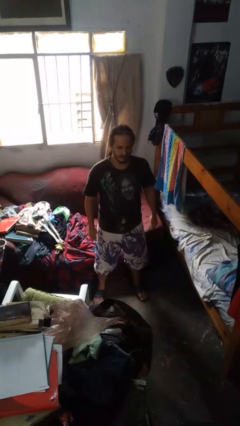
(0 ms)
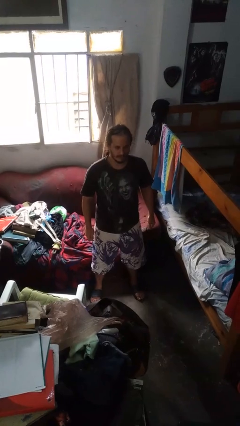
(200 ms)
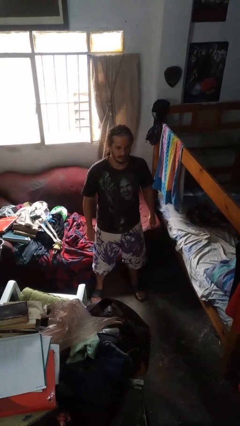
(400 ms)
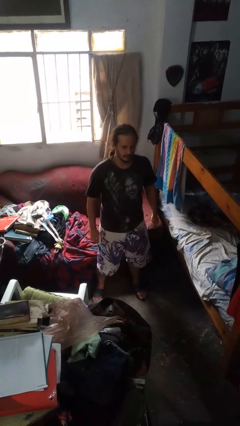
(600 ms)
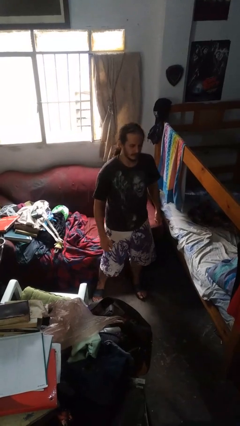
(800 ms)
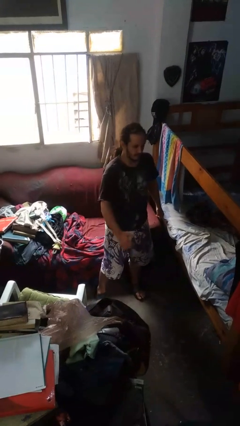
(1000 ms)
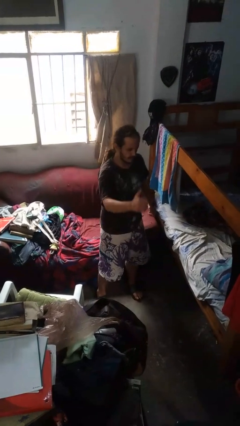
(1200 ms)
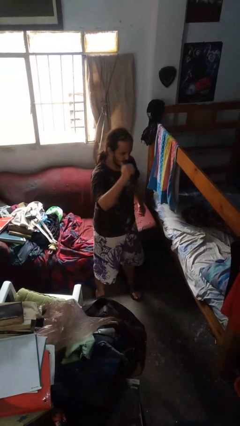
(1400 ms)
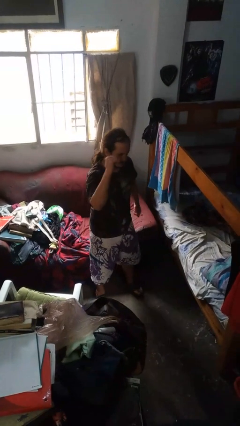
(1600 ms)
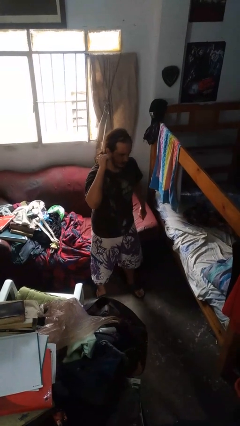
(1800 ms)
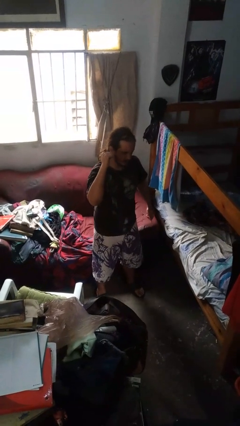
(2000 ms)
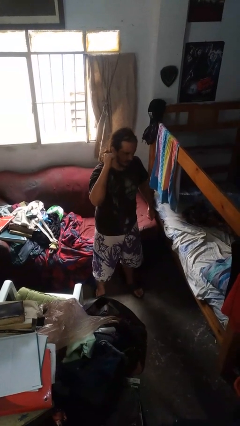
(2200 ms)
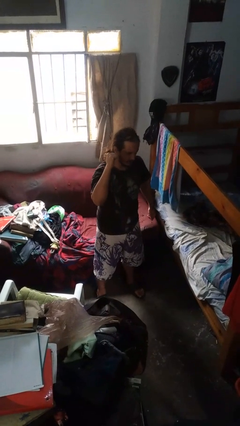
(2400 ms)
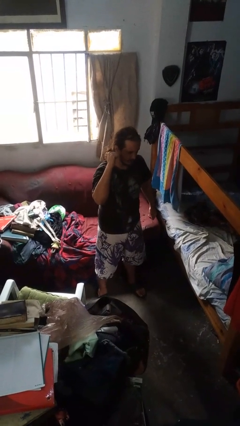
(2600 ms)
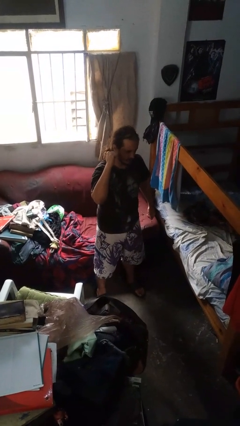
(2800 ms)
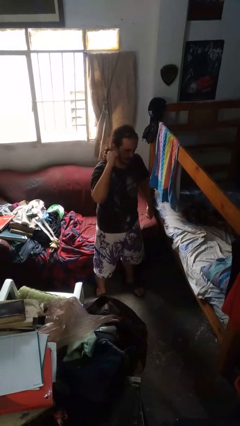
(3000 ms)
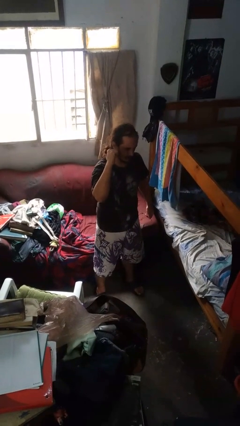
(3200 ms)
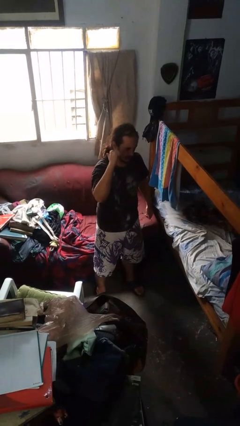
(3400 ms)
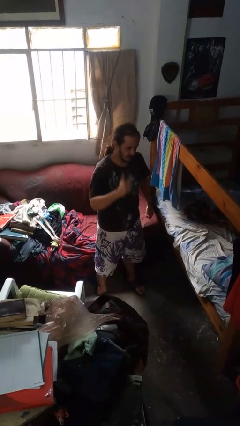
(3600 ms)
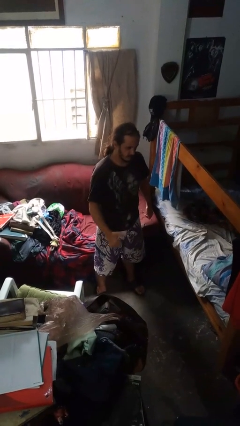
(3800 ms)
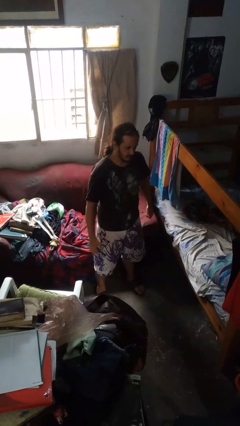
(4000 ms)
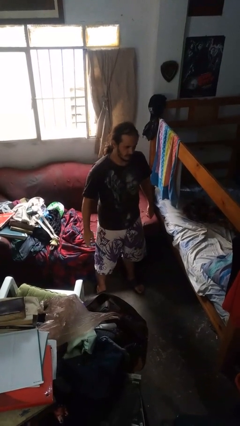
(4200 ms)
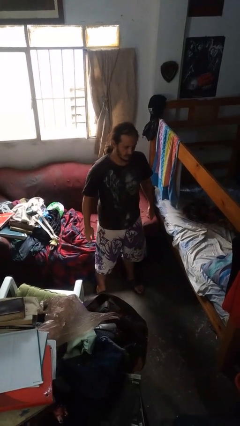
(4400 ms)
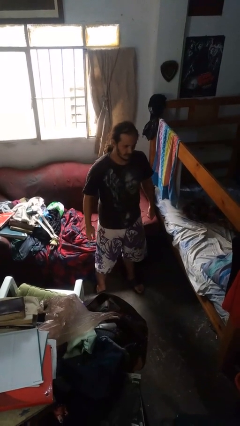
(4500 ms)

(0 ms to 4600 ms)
person gestures behind me

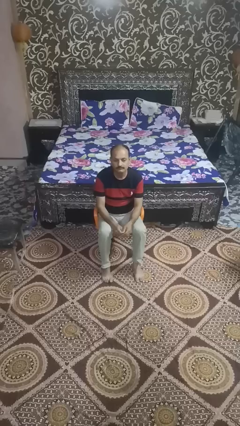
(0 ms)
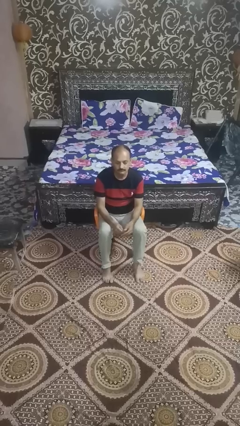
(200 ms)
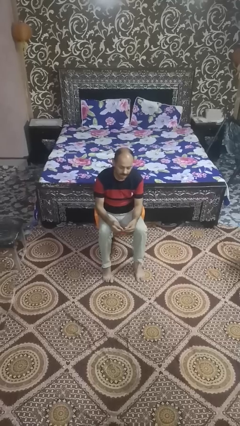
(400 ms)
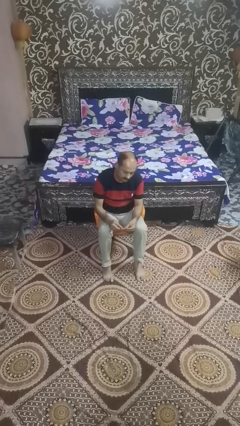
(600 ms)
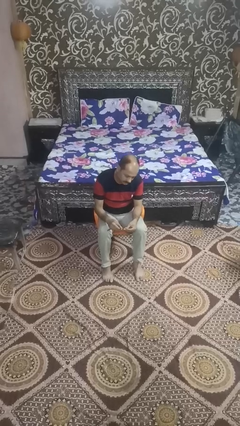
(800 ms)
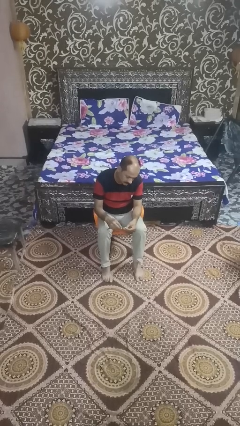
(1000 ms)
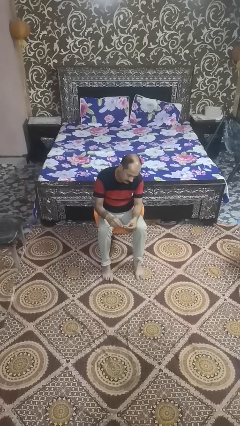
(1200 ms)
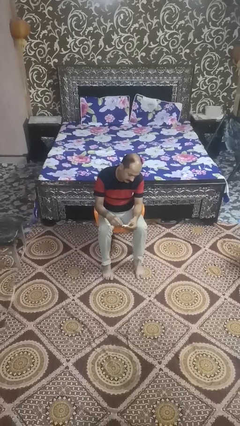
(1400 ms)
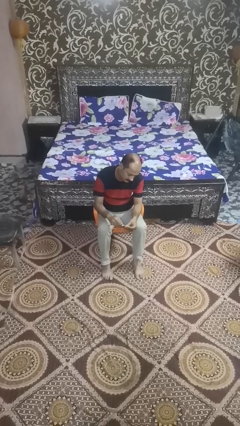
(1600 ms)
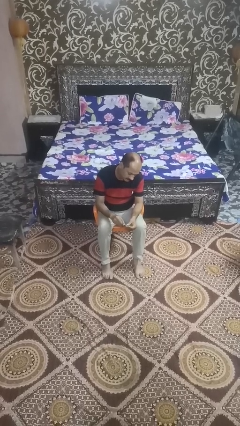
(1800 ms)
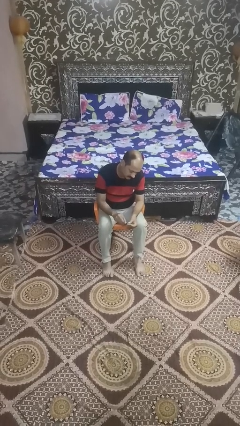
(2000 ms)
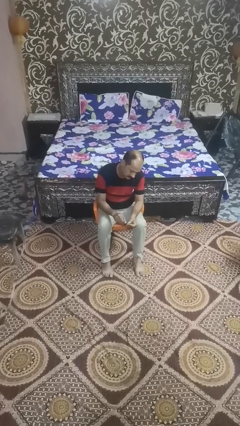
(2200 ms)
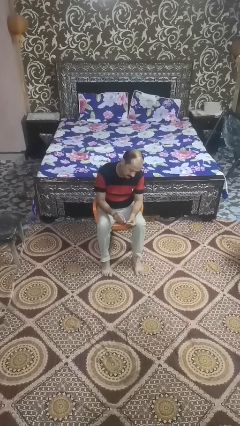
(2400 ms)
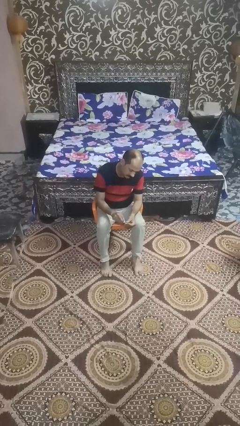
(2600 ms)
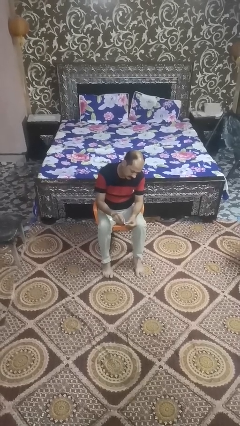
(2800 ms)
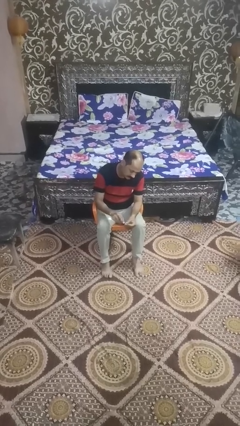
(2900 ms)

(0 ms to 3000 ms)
person files fingernails

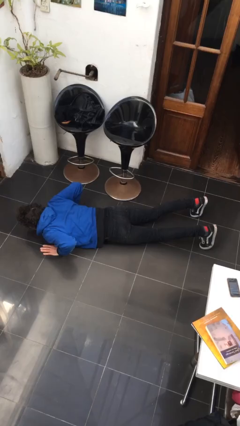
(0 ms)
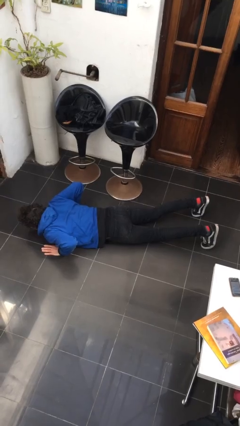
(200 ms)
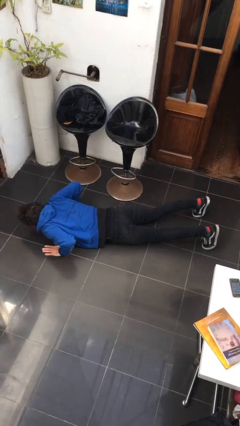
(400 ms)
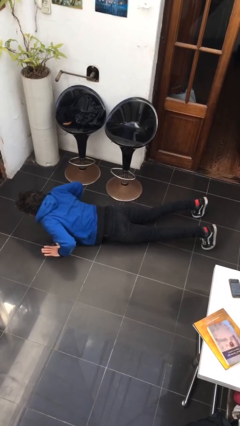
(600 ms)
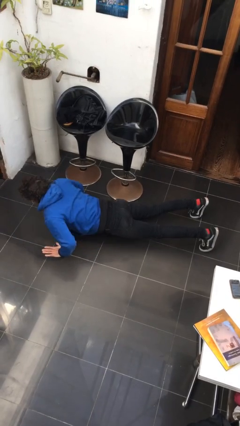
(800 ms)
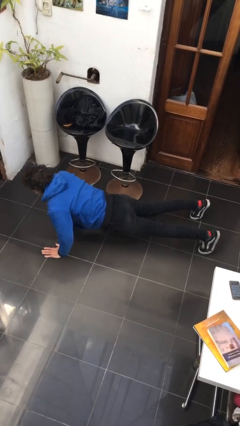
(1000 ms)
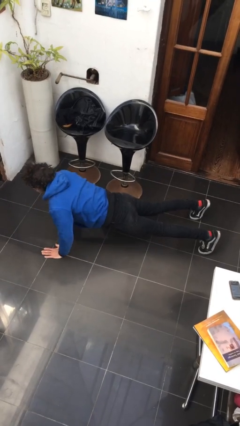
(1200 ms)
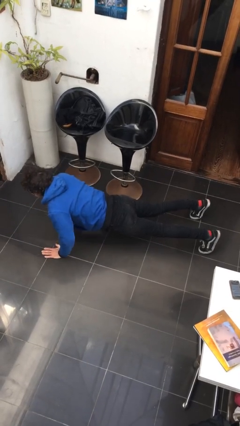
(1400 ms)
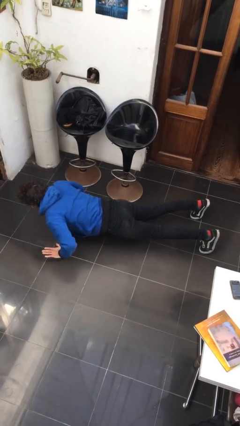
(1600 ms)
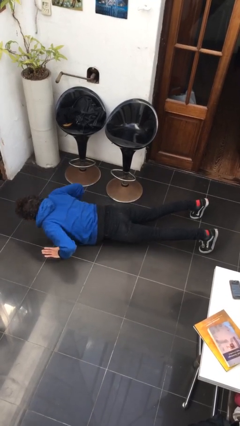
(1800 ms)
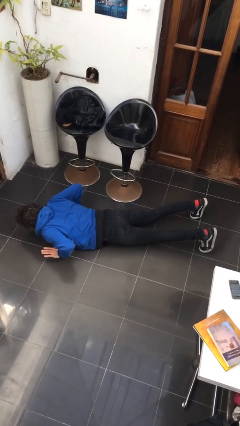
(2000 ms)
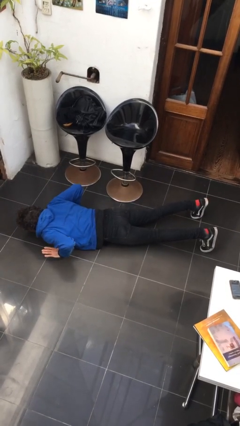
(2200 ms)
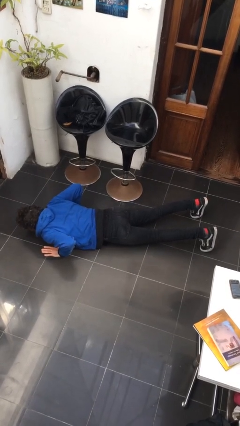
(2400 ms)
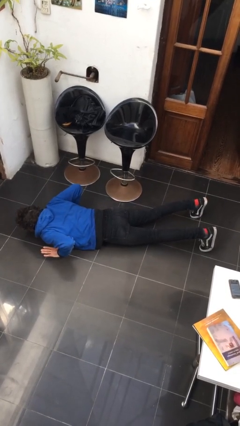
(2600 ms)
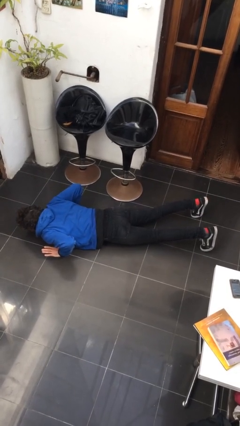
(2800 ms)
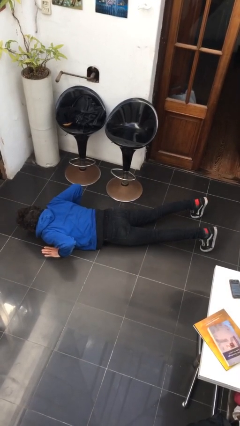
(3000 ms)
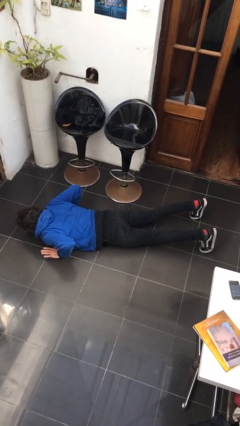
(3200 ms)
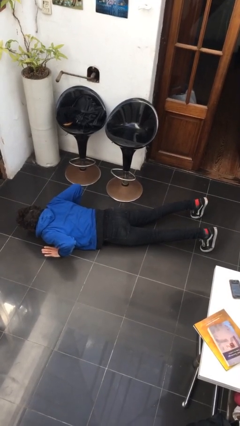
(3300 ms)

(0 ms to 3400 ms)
person exercises with pushup

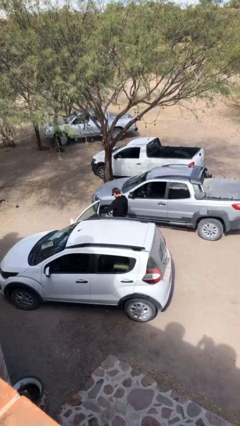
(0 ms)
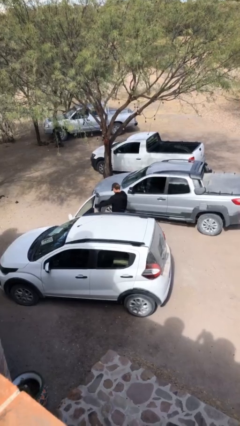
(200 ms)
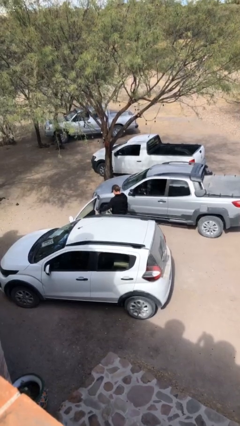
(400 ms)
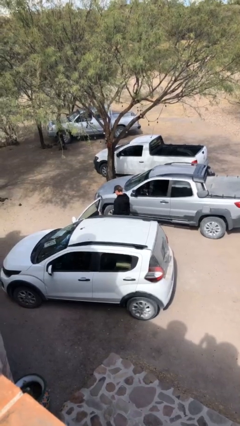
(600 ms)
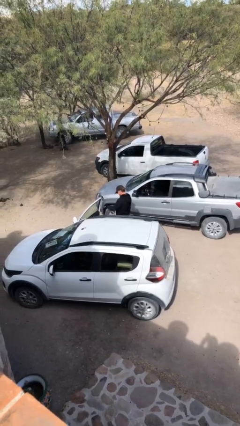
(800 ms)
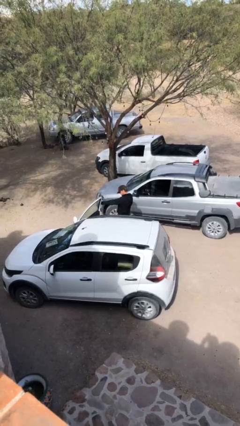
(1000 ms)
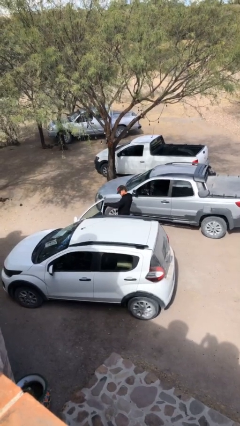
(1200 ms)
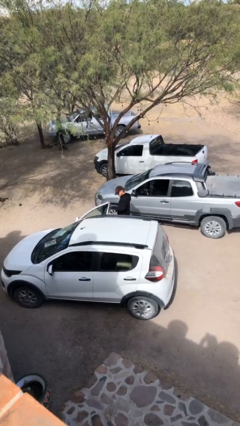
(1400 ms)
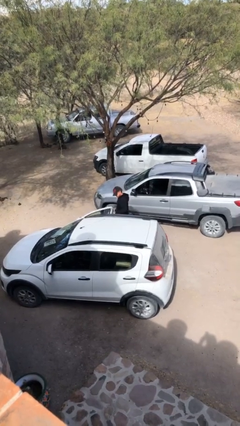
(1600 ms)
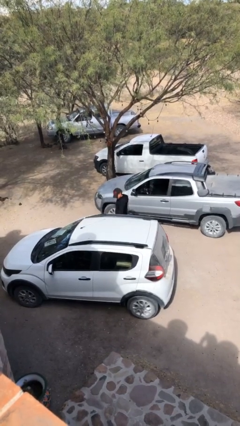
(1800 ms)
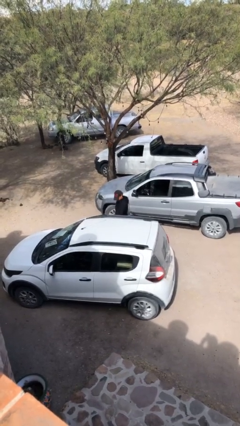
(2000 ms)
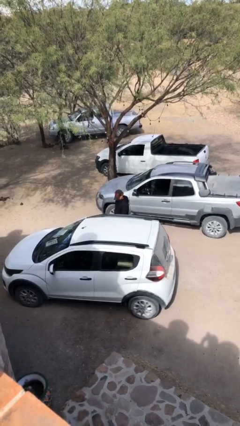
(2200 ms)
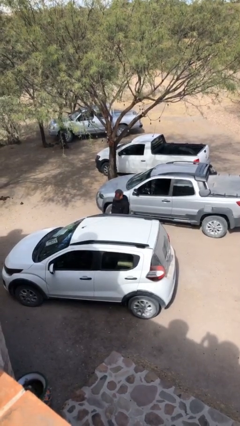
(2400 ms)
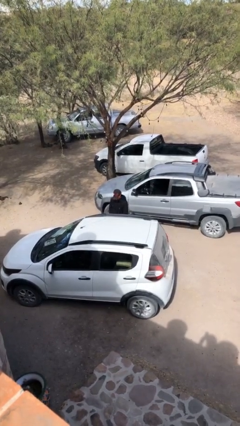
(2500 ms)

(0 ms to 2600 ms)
person closes car door

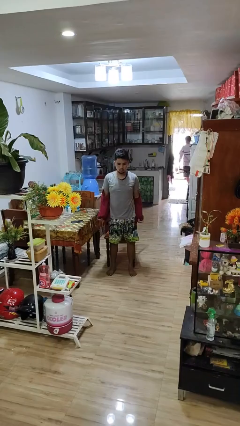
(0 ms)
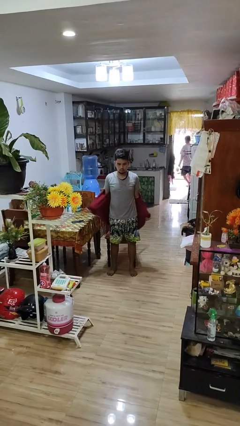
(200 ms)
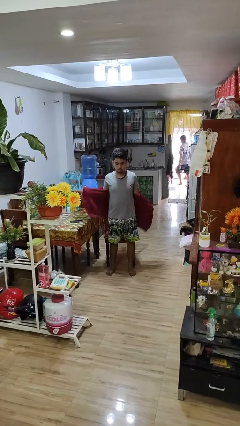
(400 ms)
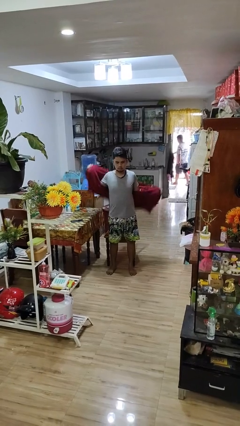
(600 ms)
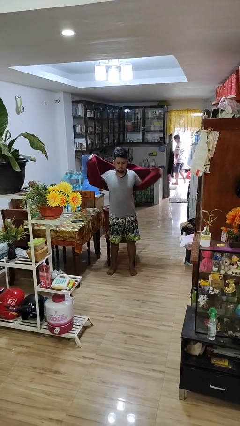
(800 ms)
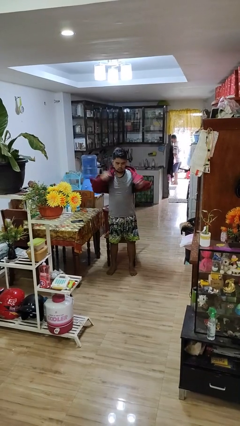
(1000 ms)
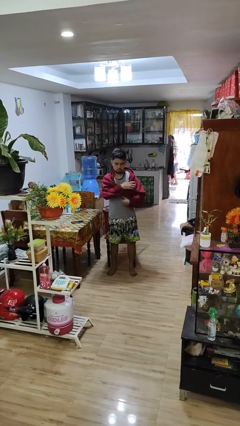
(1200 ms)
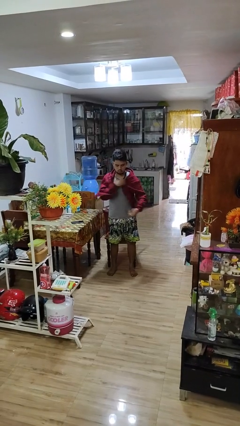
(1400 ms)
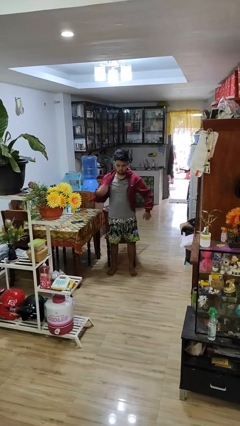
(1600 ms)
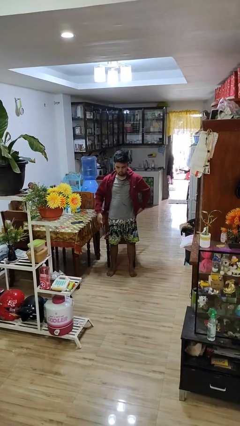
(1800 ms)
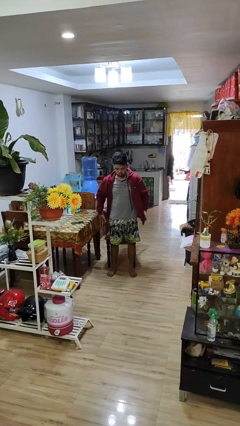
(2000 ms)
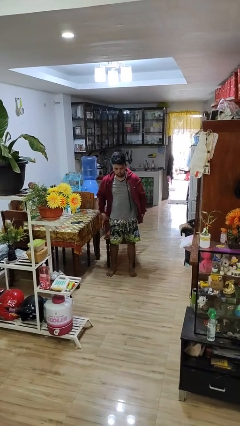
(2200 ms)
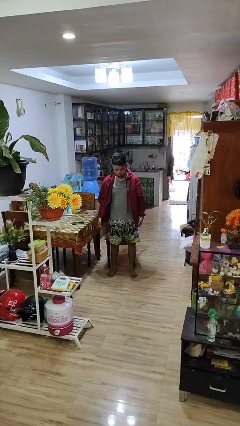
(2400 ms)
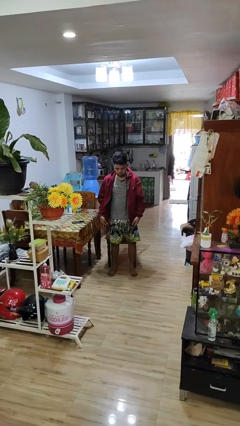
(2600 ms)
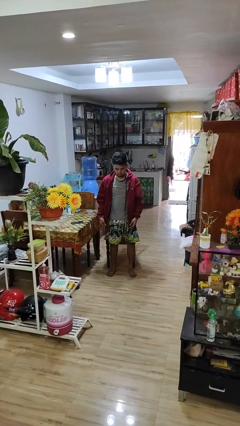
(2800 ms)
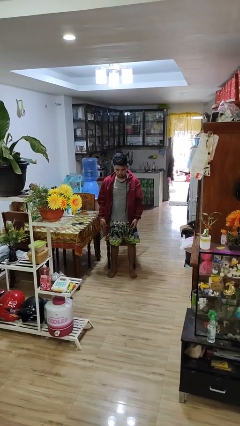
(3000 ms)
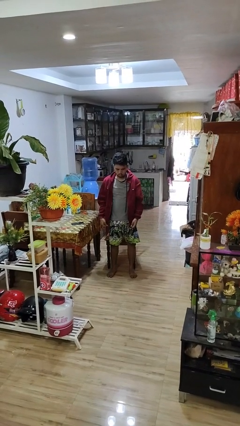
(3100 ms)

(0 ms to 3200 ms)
person puts on jacket

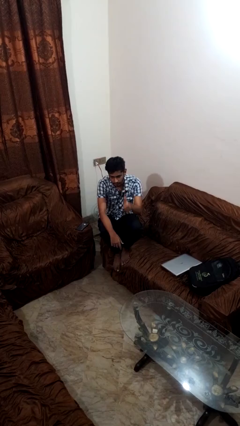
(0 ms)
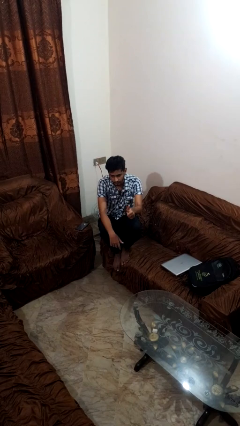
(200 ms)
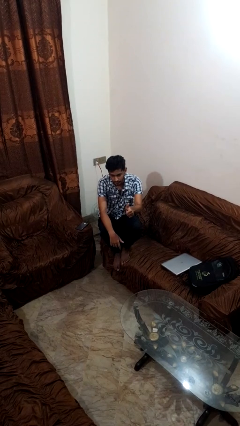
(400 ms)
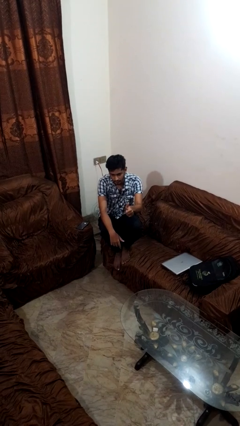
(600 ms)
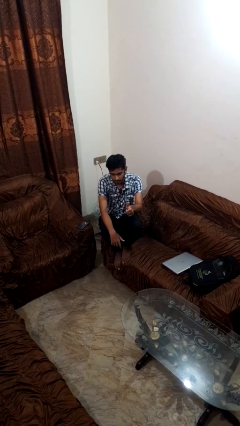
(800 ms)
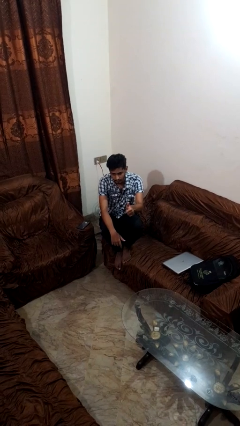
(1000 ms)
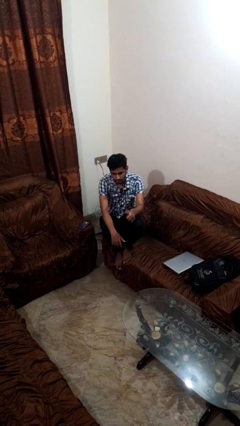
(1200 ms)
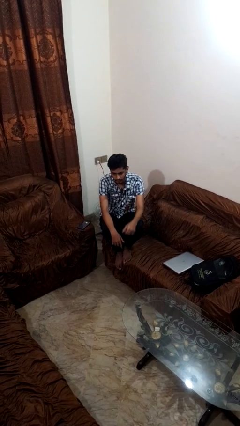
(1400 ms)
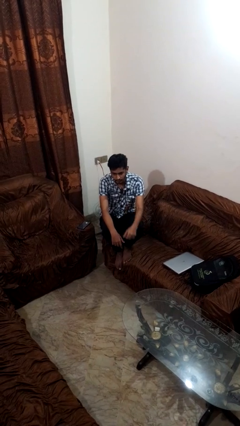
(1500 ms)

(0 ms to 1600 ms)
person gestures thumbs up
